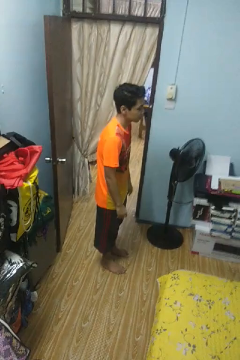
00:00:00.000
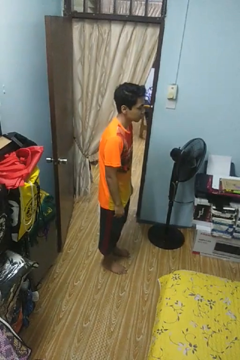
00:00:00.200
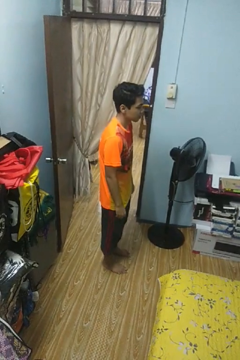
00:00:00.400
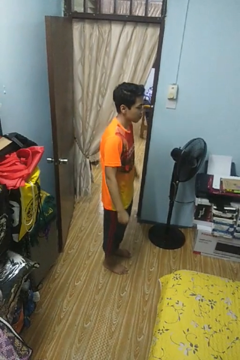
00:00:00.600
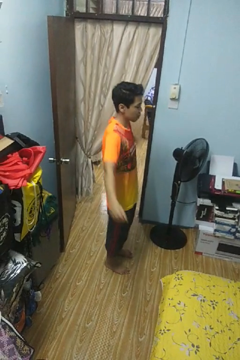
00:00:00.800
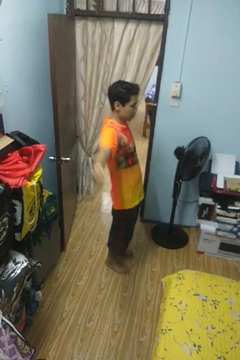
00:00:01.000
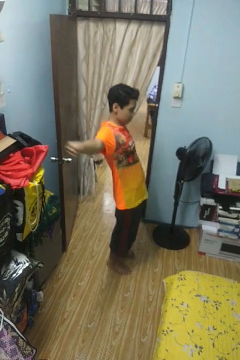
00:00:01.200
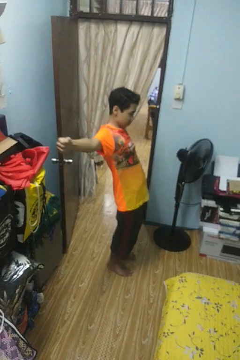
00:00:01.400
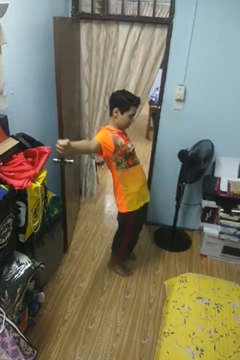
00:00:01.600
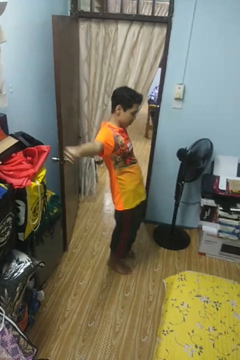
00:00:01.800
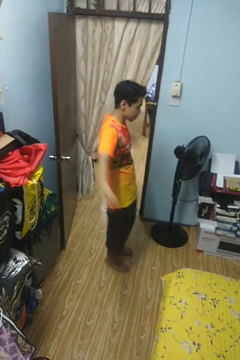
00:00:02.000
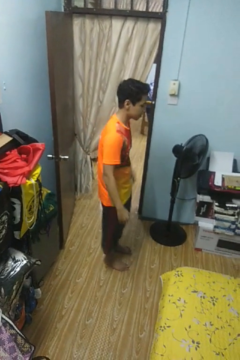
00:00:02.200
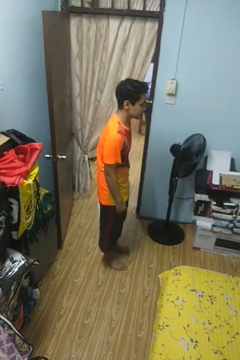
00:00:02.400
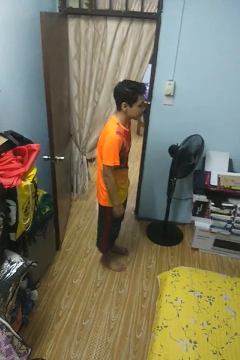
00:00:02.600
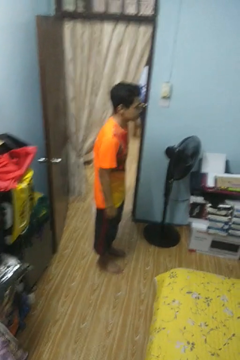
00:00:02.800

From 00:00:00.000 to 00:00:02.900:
person stretches arms to side

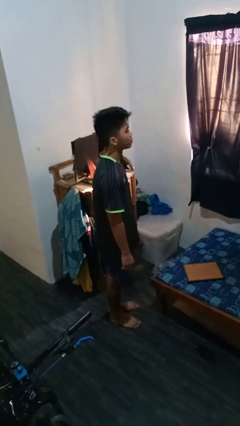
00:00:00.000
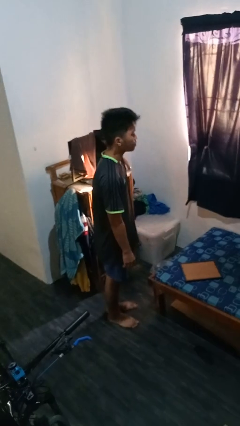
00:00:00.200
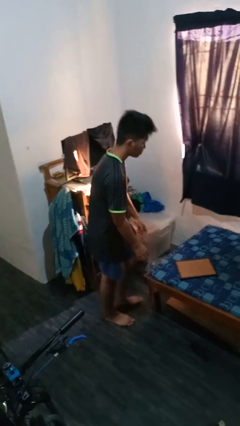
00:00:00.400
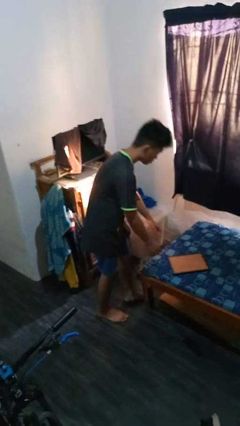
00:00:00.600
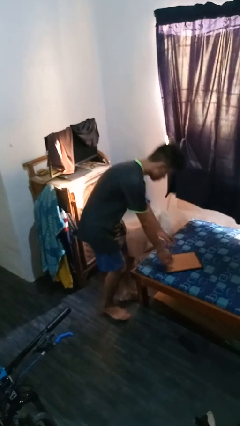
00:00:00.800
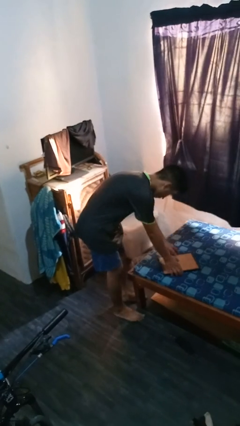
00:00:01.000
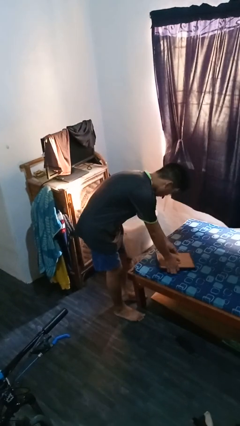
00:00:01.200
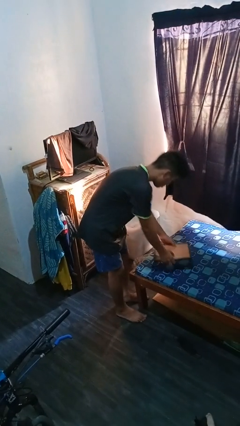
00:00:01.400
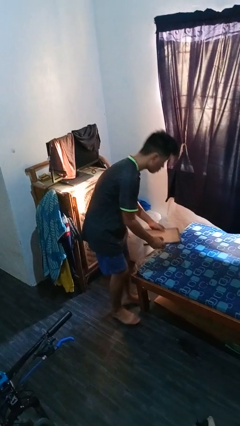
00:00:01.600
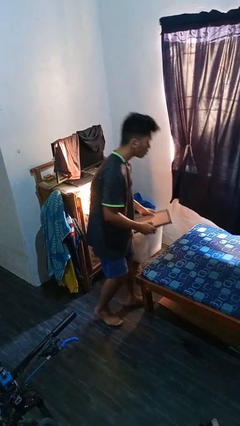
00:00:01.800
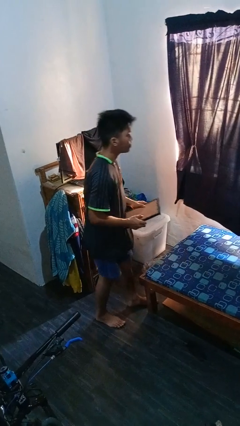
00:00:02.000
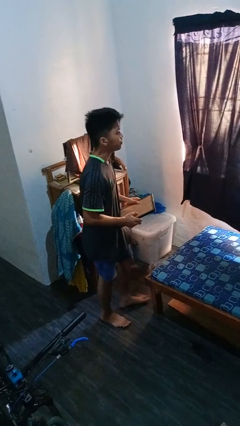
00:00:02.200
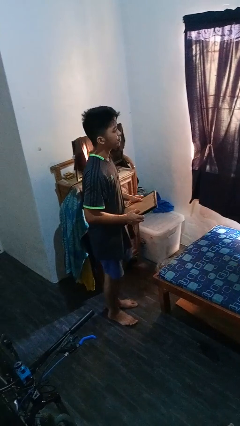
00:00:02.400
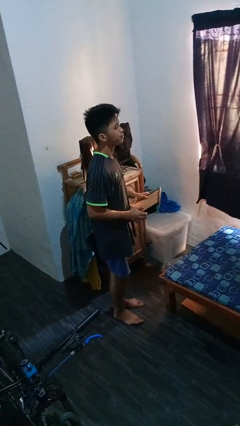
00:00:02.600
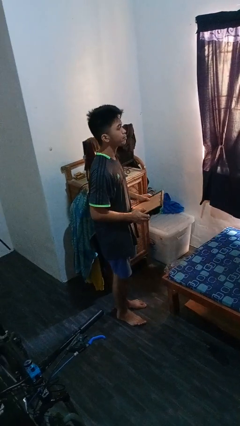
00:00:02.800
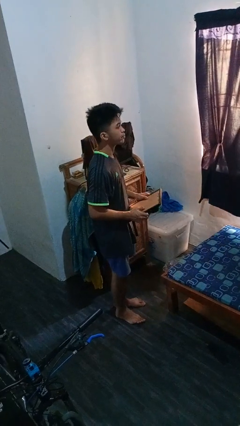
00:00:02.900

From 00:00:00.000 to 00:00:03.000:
person picks up object from bed

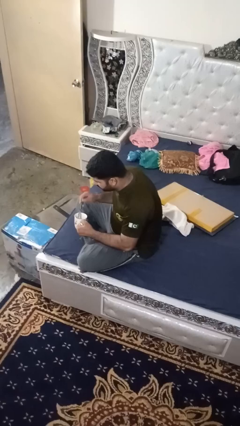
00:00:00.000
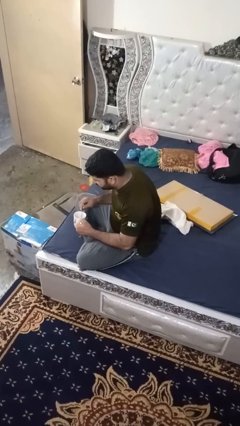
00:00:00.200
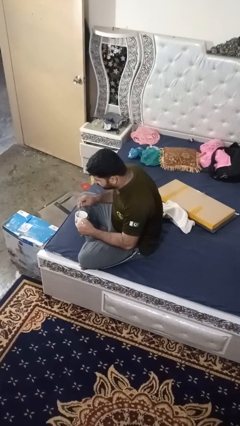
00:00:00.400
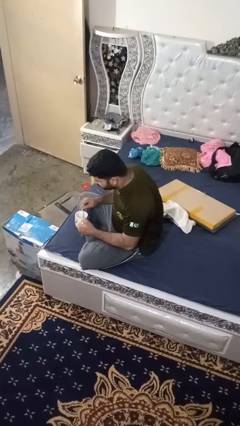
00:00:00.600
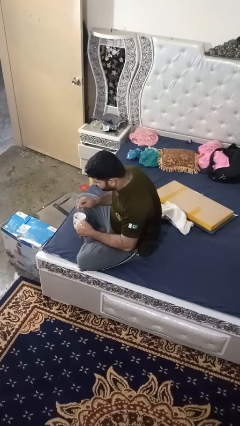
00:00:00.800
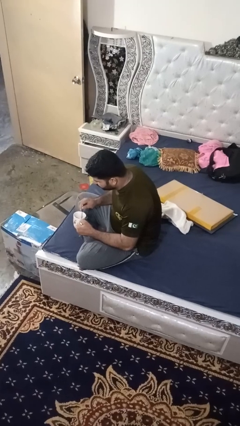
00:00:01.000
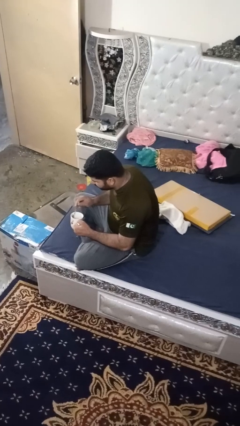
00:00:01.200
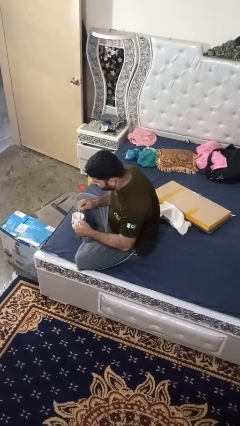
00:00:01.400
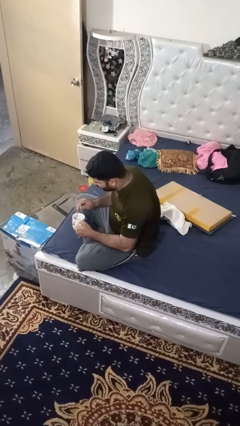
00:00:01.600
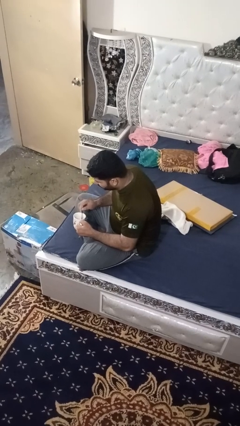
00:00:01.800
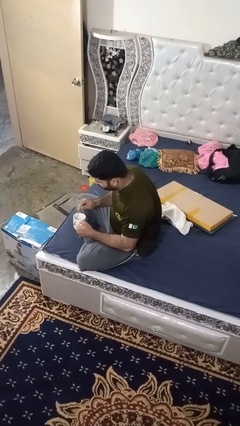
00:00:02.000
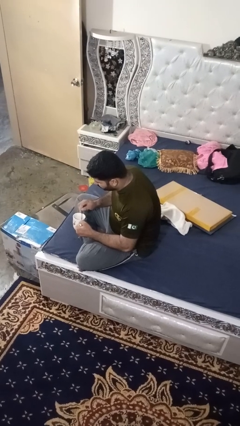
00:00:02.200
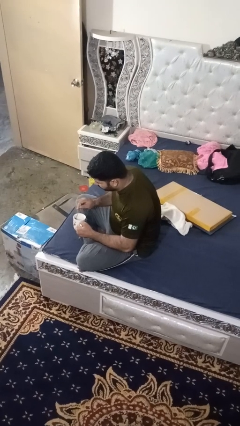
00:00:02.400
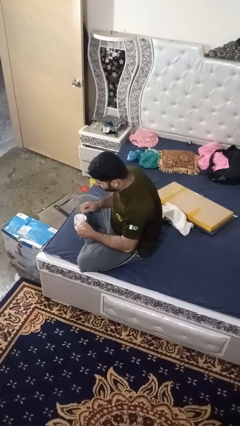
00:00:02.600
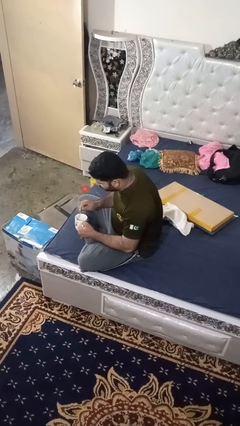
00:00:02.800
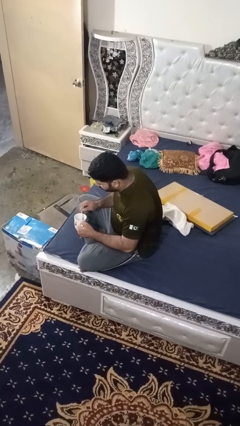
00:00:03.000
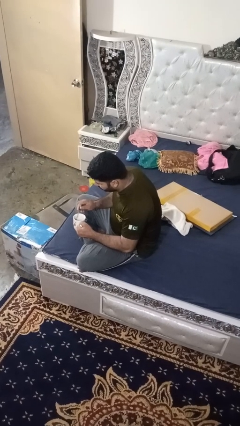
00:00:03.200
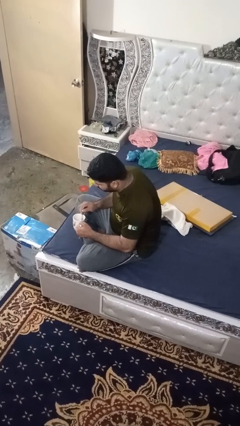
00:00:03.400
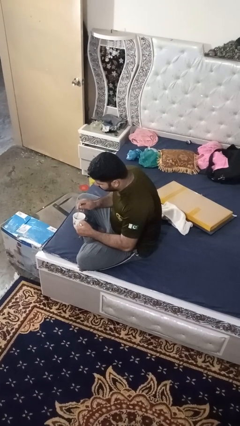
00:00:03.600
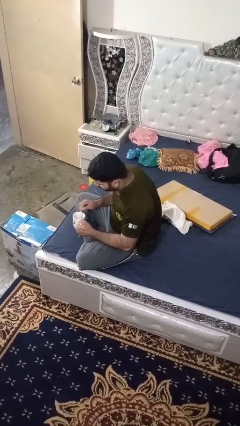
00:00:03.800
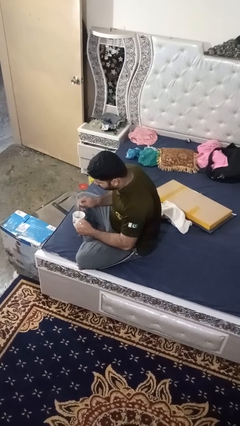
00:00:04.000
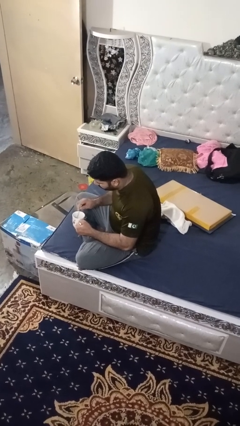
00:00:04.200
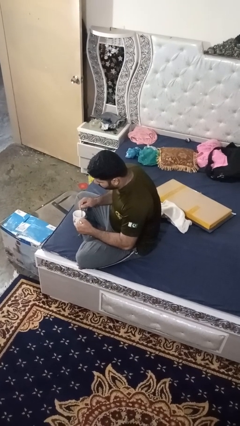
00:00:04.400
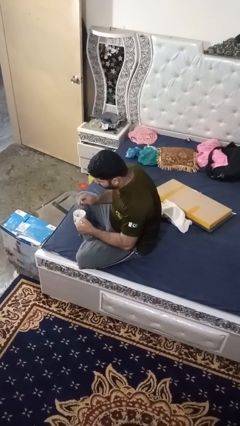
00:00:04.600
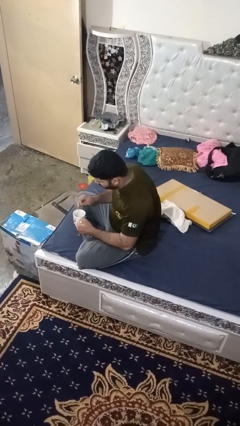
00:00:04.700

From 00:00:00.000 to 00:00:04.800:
person stirs mug

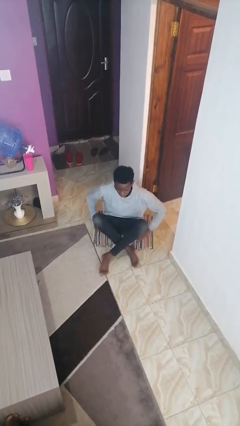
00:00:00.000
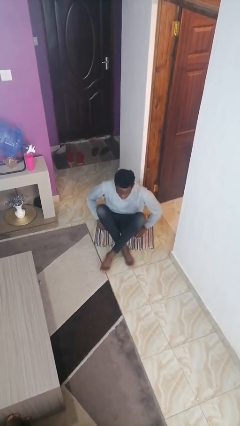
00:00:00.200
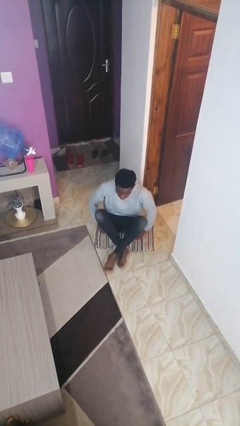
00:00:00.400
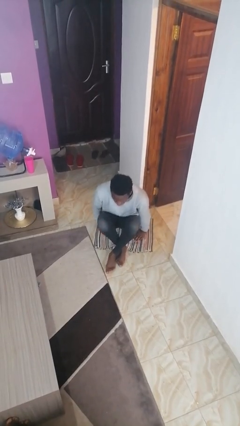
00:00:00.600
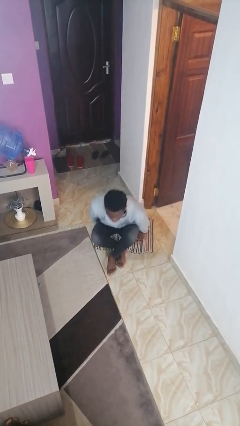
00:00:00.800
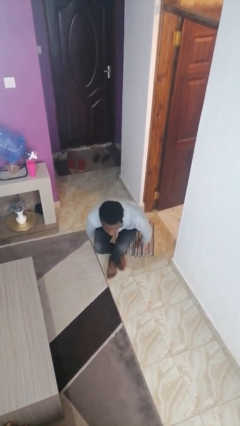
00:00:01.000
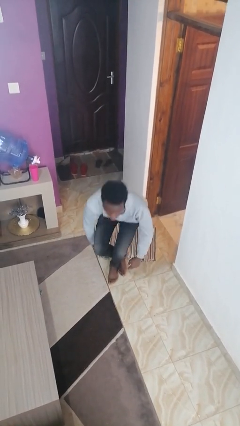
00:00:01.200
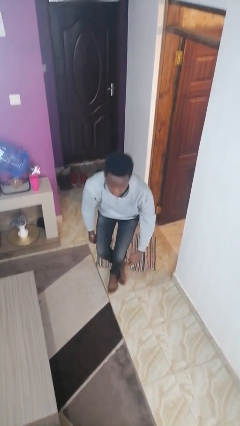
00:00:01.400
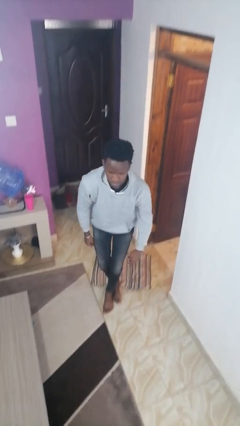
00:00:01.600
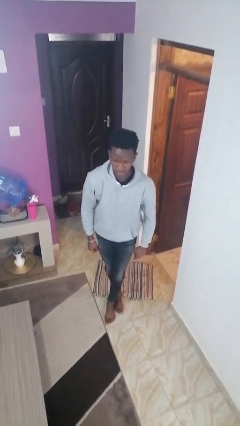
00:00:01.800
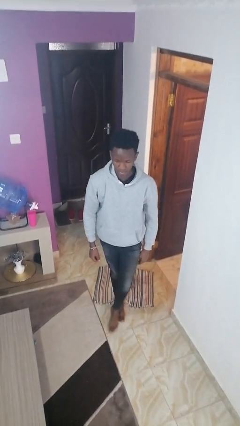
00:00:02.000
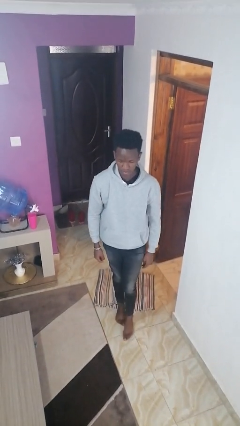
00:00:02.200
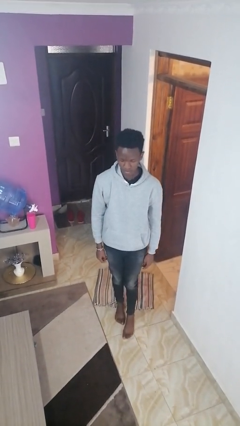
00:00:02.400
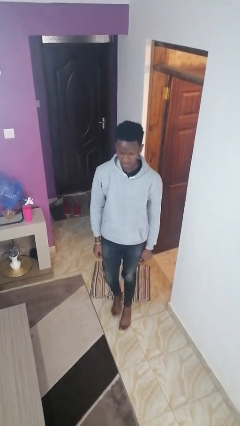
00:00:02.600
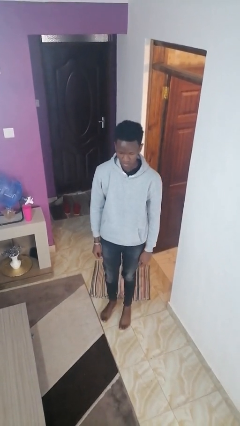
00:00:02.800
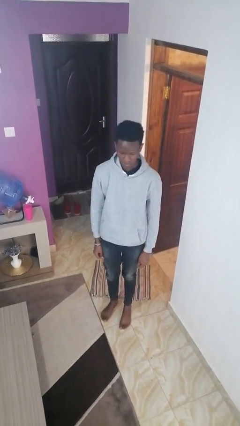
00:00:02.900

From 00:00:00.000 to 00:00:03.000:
person stands up from floor

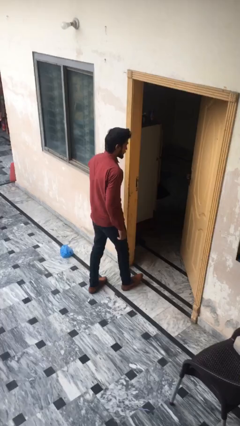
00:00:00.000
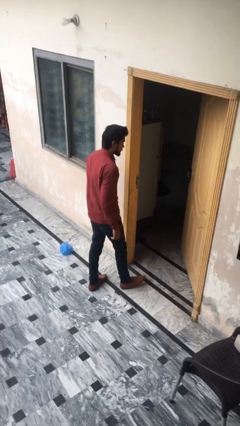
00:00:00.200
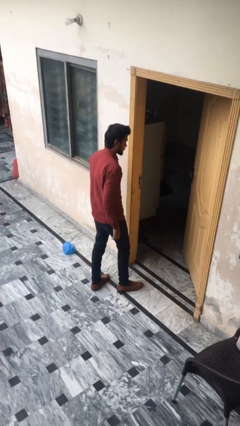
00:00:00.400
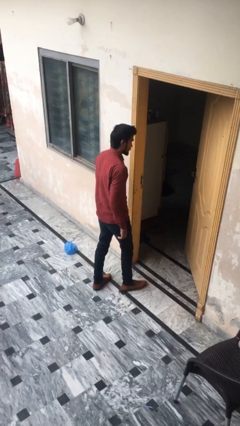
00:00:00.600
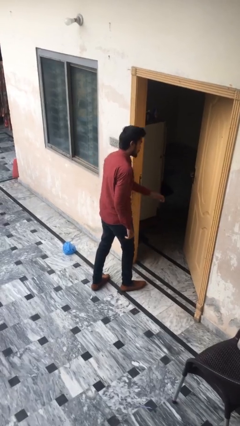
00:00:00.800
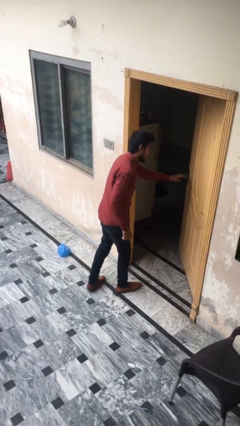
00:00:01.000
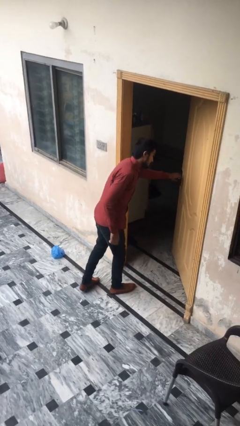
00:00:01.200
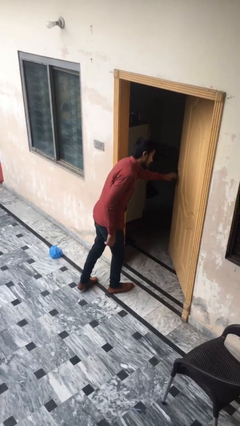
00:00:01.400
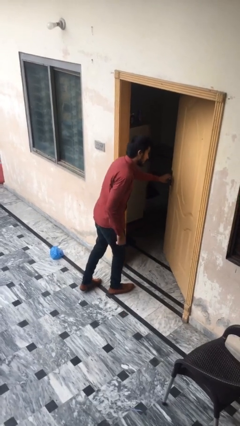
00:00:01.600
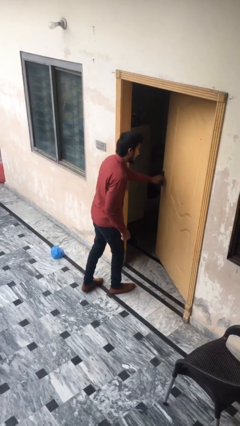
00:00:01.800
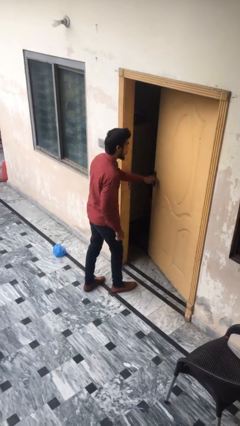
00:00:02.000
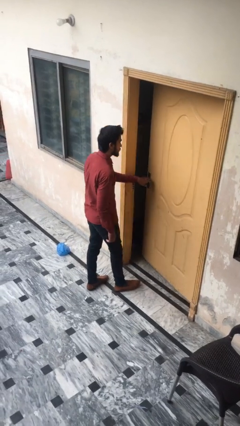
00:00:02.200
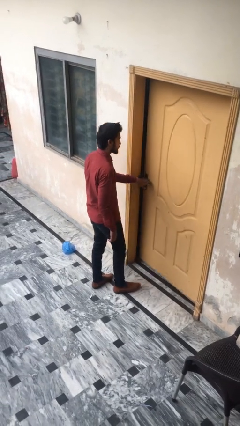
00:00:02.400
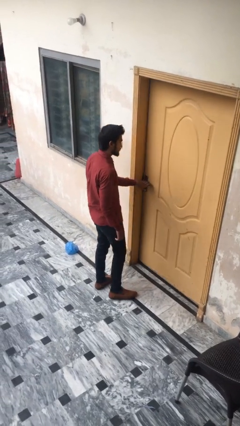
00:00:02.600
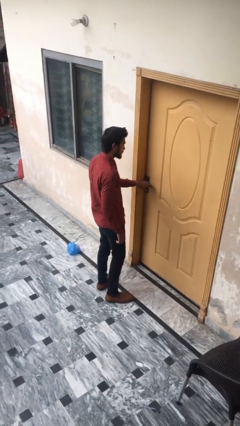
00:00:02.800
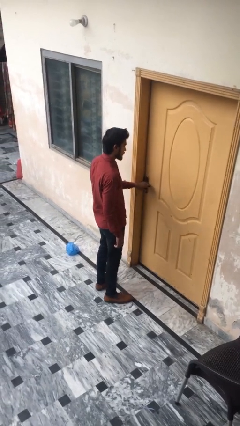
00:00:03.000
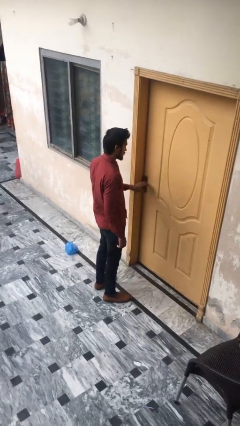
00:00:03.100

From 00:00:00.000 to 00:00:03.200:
person closes facility door

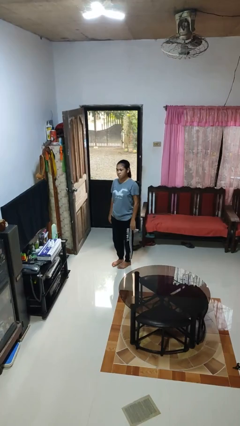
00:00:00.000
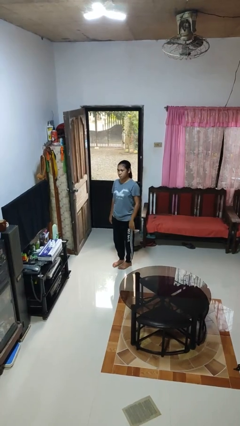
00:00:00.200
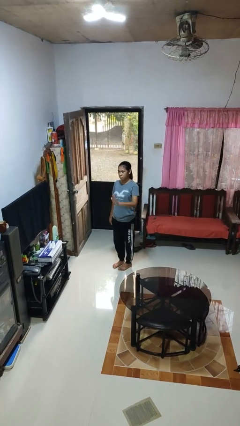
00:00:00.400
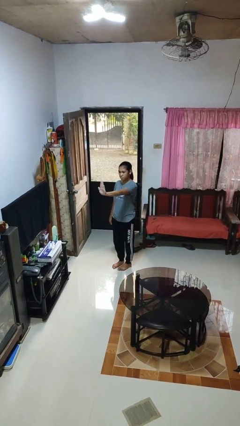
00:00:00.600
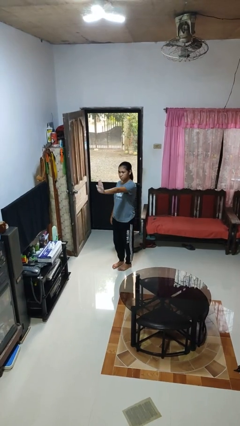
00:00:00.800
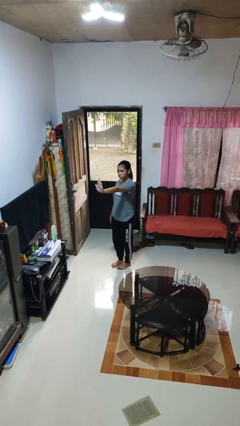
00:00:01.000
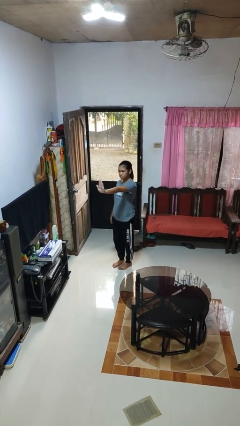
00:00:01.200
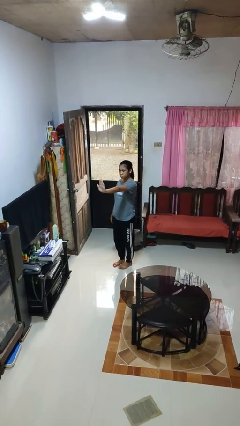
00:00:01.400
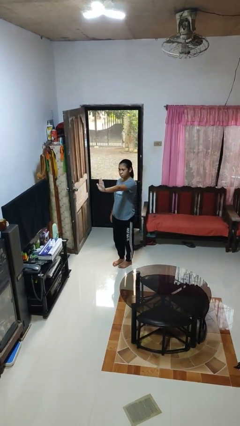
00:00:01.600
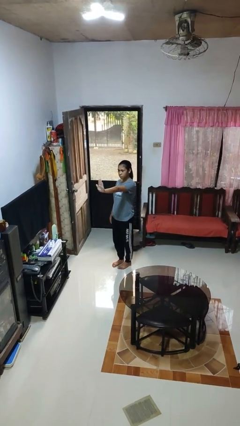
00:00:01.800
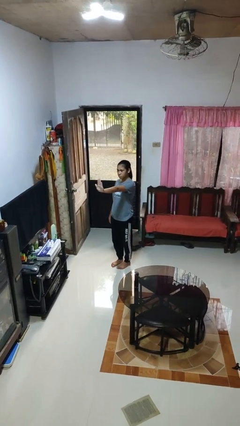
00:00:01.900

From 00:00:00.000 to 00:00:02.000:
person gestures stop
